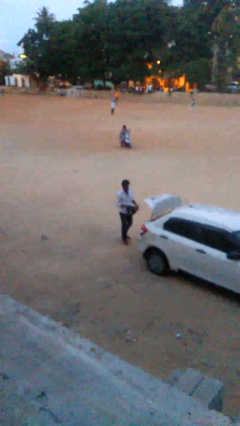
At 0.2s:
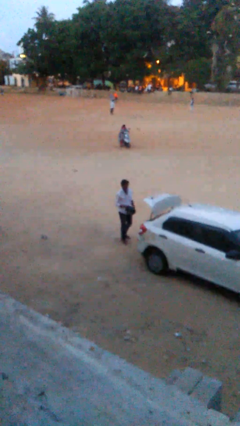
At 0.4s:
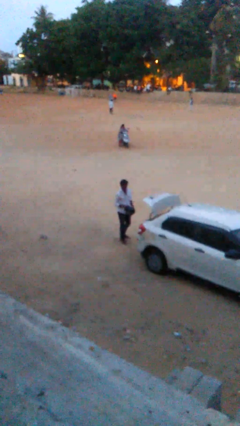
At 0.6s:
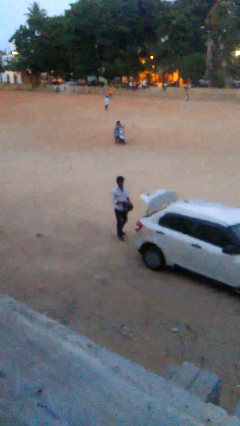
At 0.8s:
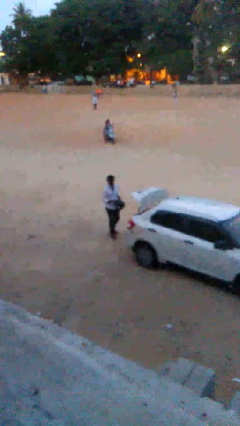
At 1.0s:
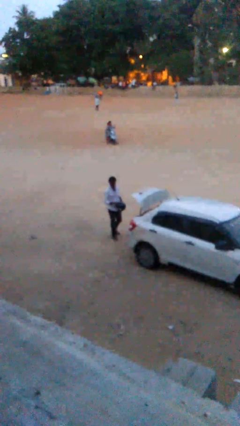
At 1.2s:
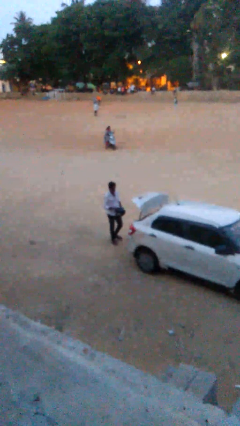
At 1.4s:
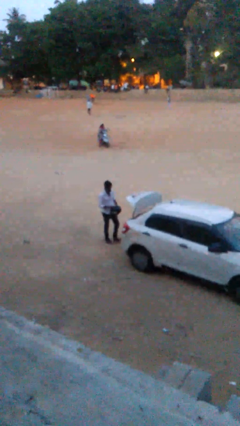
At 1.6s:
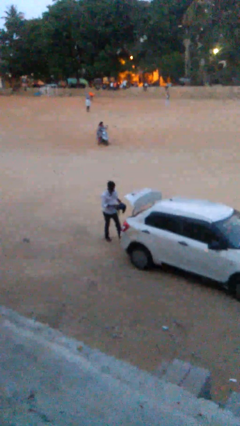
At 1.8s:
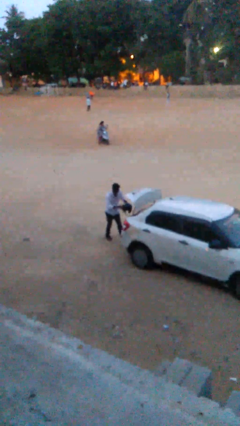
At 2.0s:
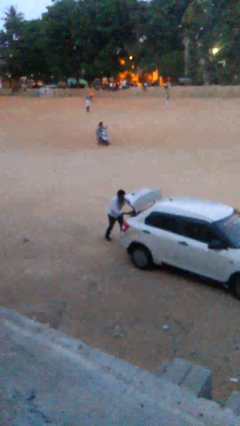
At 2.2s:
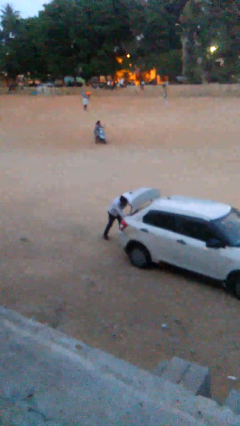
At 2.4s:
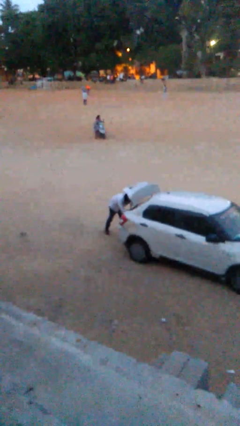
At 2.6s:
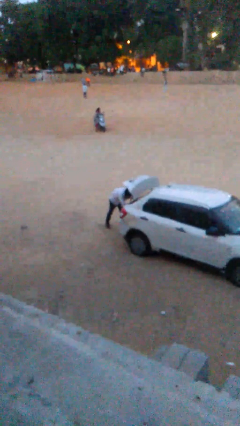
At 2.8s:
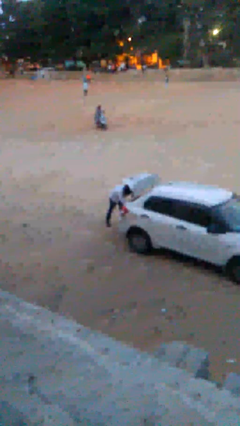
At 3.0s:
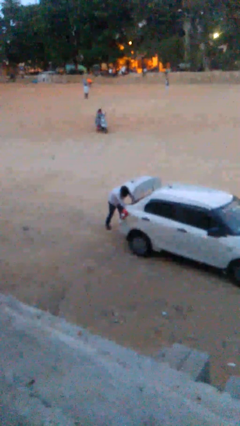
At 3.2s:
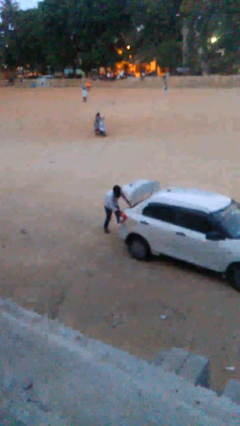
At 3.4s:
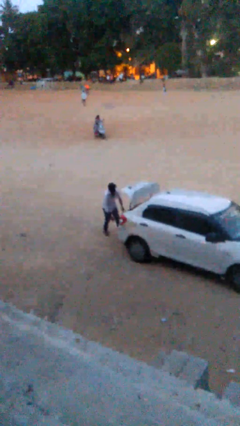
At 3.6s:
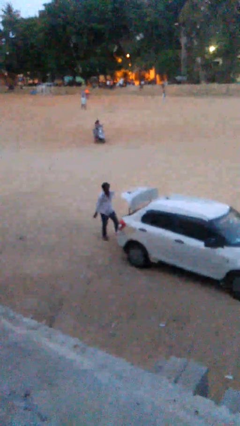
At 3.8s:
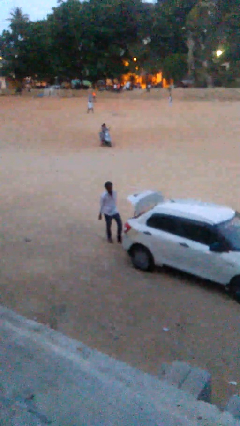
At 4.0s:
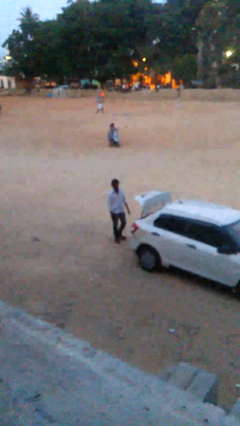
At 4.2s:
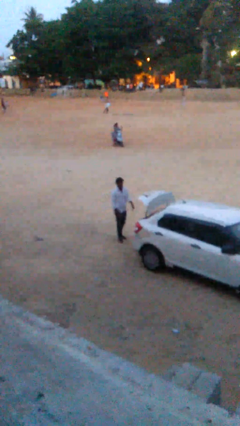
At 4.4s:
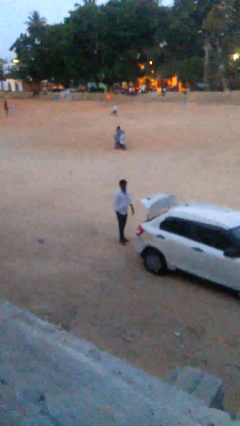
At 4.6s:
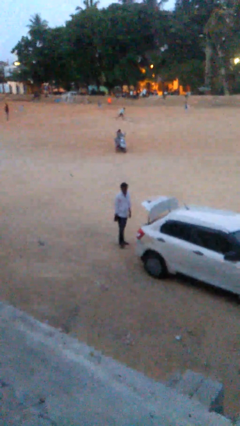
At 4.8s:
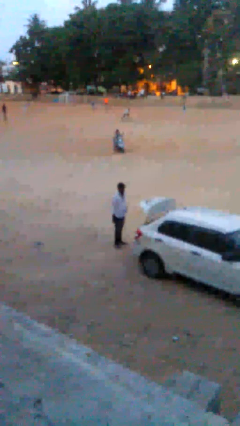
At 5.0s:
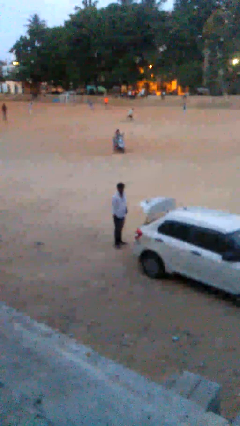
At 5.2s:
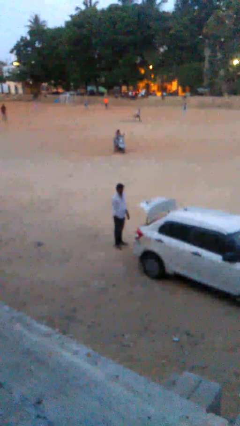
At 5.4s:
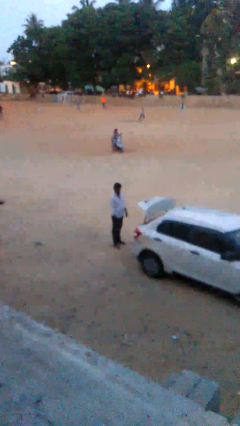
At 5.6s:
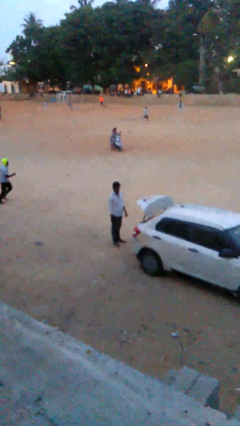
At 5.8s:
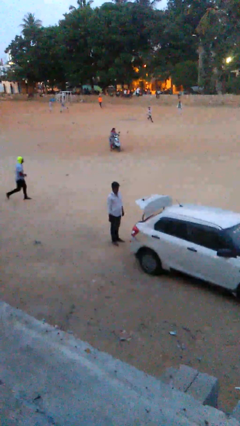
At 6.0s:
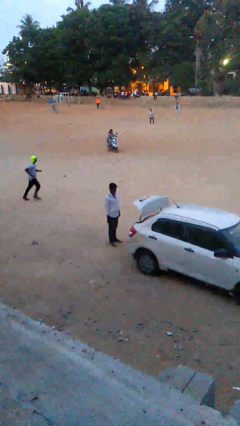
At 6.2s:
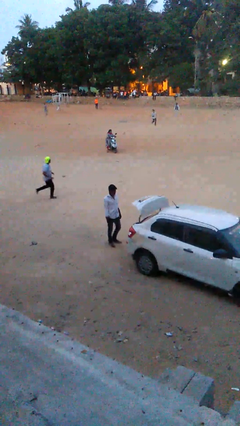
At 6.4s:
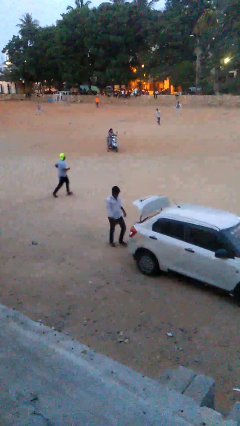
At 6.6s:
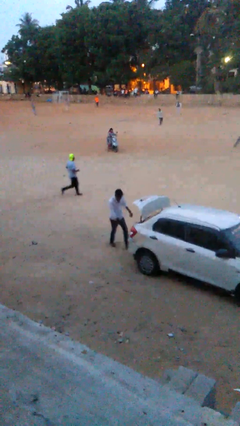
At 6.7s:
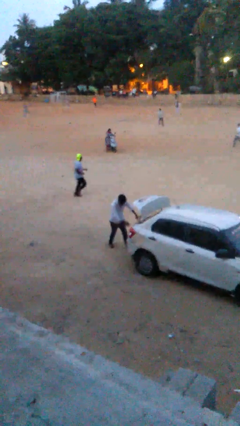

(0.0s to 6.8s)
person loads car

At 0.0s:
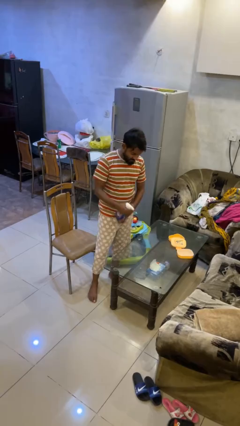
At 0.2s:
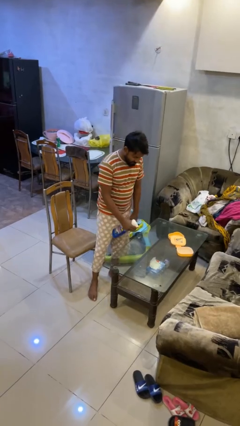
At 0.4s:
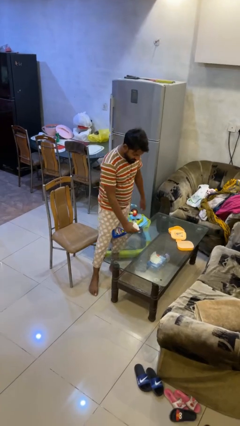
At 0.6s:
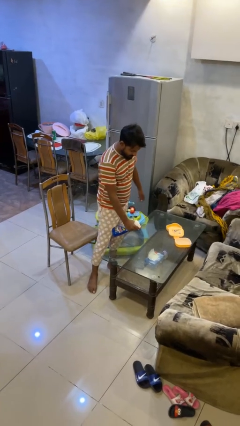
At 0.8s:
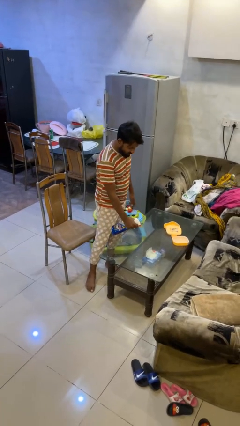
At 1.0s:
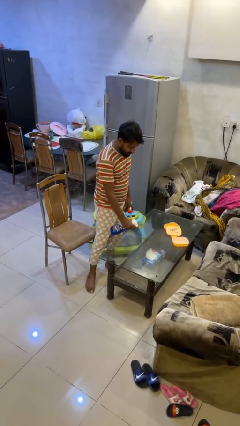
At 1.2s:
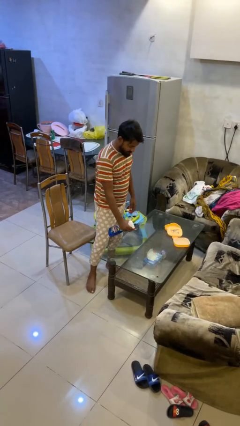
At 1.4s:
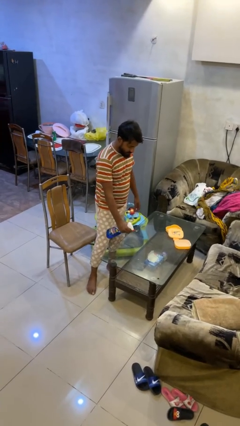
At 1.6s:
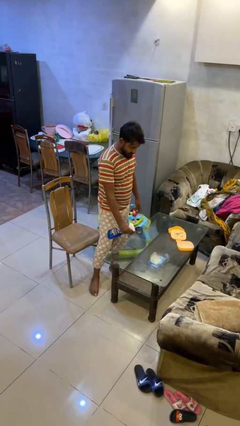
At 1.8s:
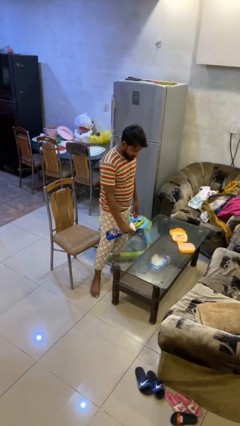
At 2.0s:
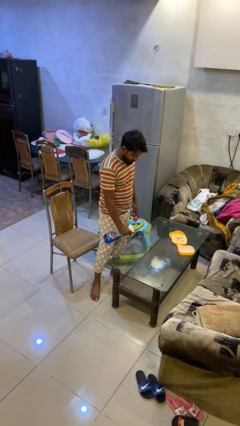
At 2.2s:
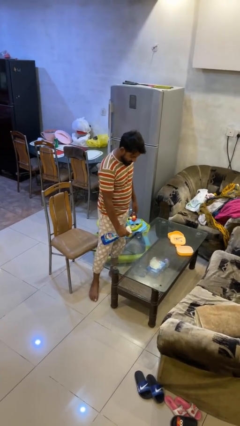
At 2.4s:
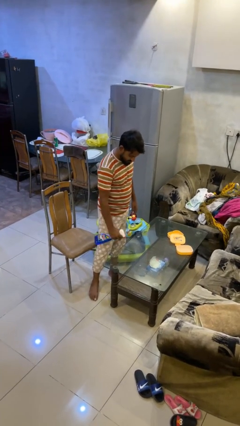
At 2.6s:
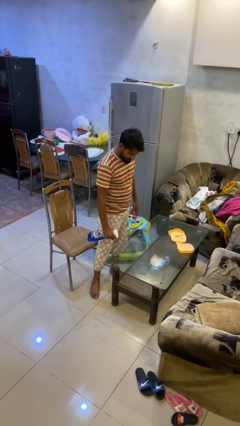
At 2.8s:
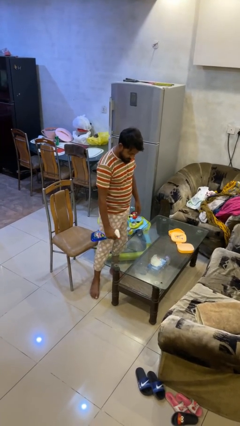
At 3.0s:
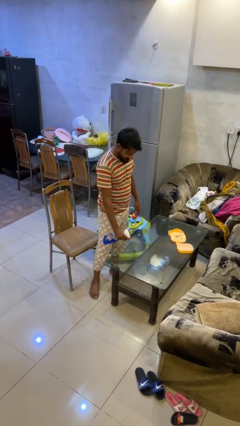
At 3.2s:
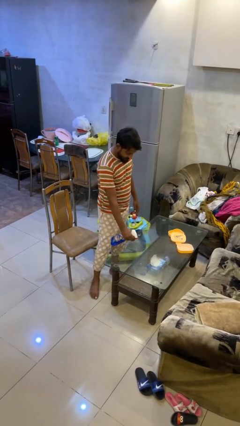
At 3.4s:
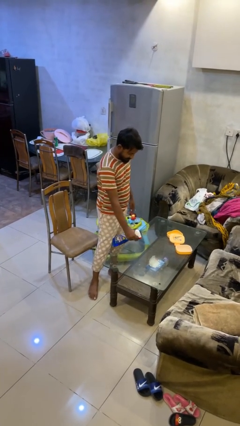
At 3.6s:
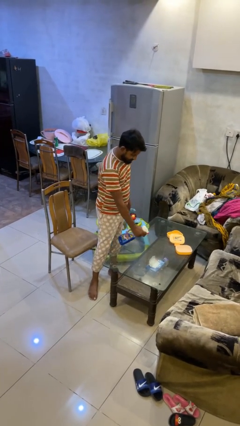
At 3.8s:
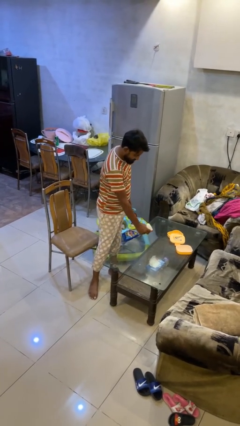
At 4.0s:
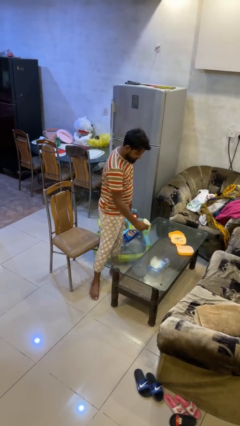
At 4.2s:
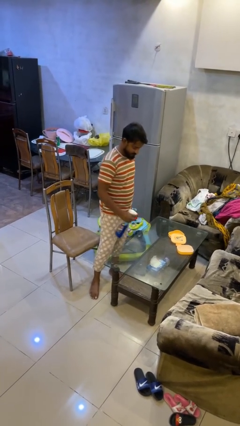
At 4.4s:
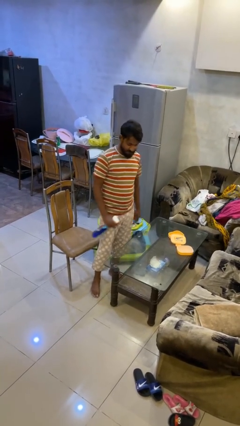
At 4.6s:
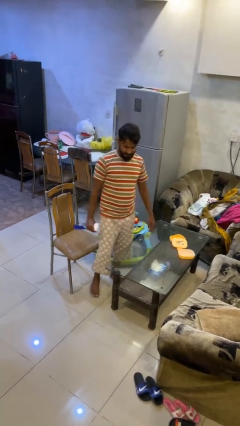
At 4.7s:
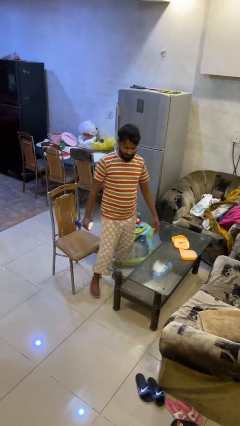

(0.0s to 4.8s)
person sprays from bottle

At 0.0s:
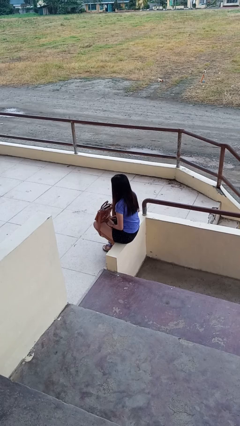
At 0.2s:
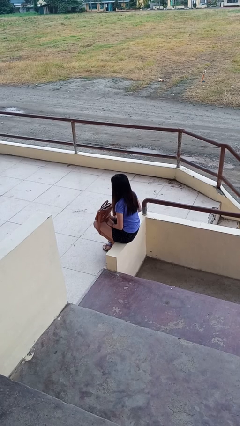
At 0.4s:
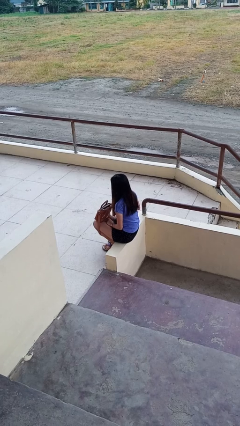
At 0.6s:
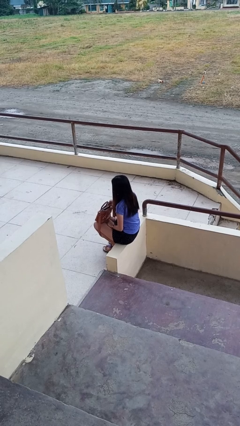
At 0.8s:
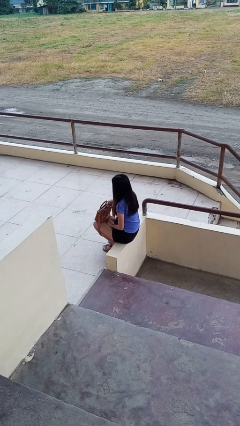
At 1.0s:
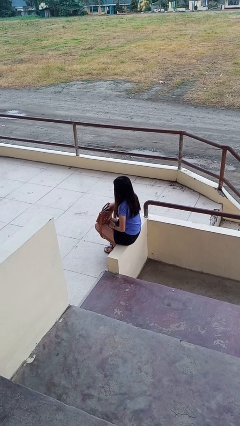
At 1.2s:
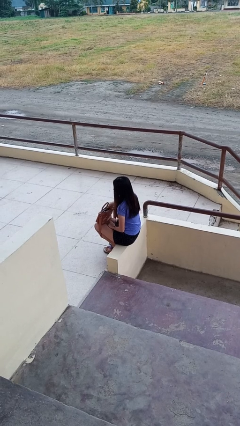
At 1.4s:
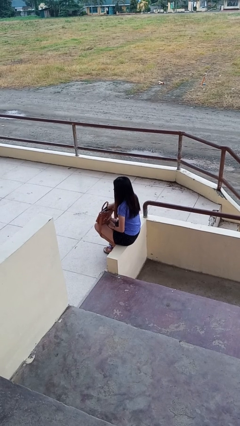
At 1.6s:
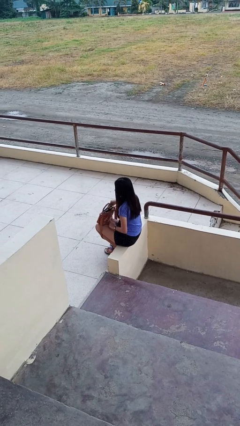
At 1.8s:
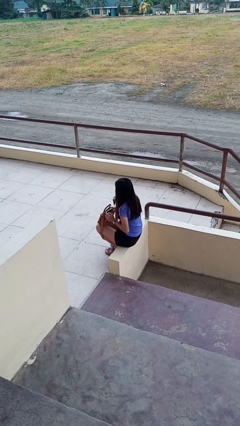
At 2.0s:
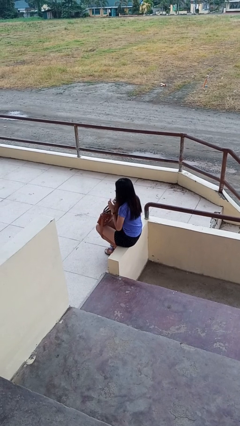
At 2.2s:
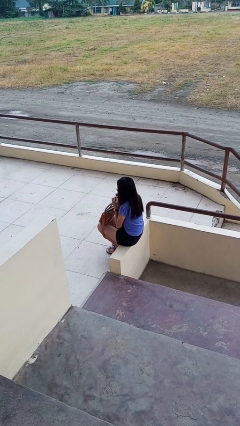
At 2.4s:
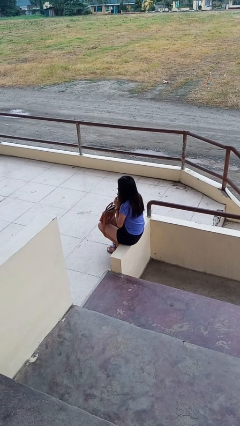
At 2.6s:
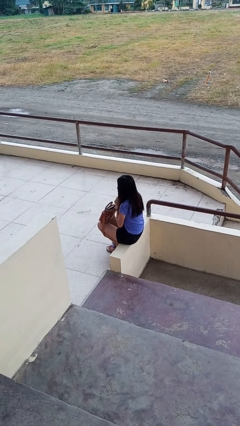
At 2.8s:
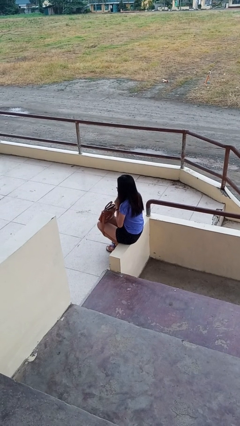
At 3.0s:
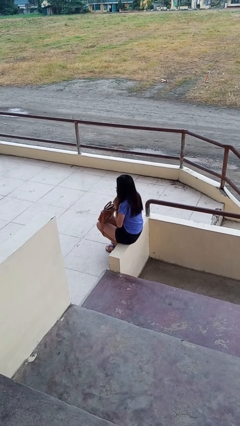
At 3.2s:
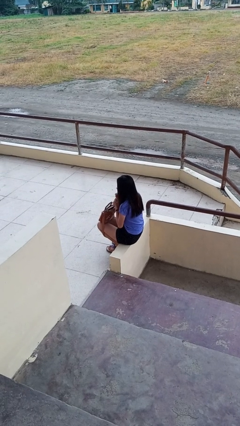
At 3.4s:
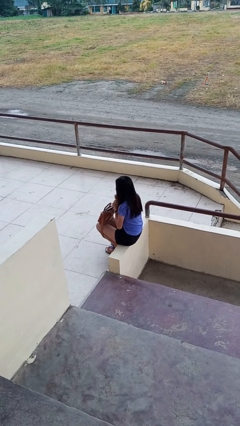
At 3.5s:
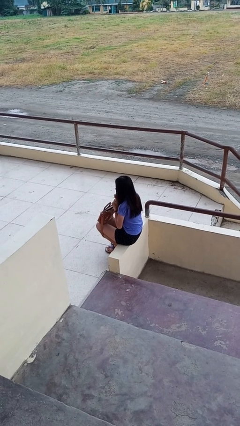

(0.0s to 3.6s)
person eats snack from bag

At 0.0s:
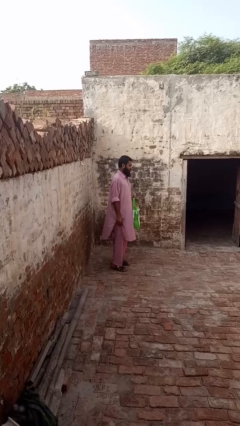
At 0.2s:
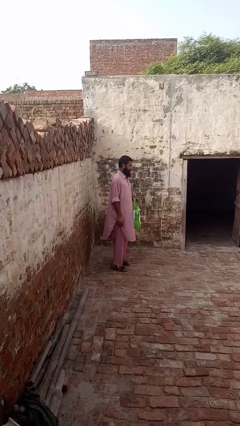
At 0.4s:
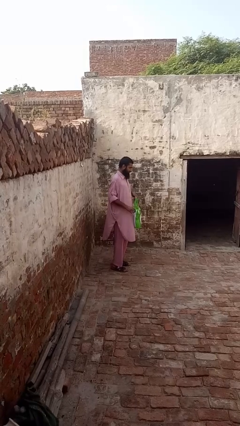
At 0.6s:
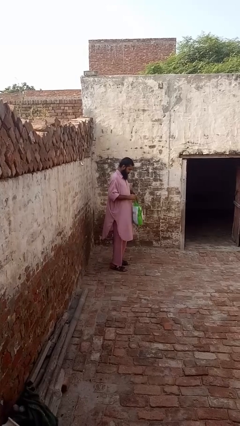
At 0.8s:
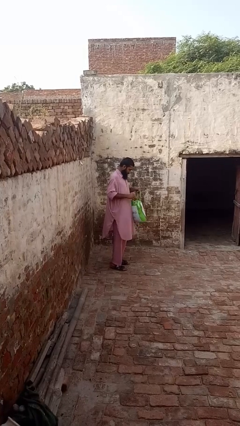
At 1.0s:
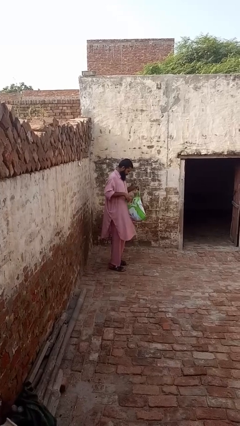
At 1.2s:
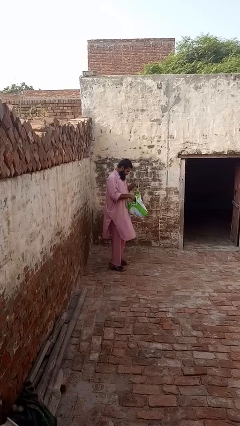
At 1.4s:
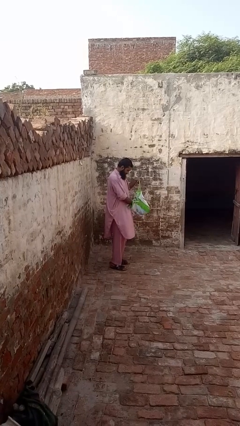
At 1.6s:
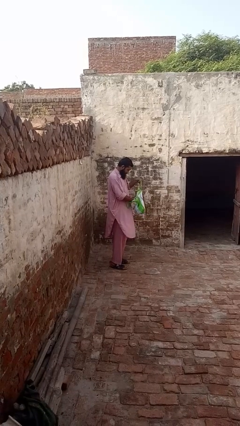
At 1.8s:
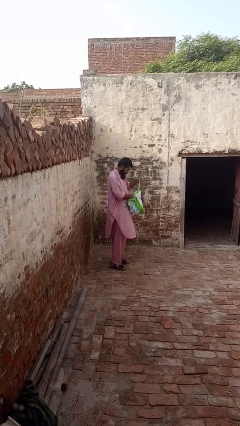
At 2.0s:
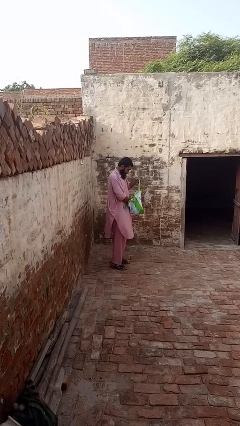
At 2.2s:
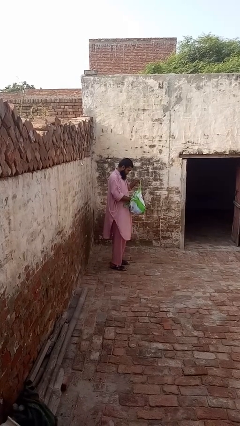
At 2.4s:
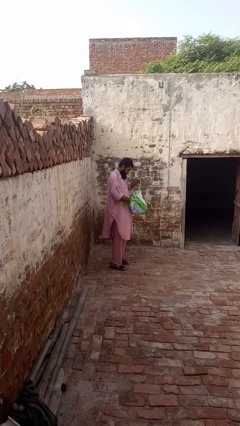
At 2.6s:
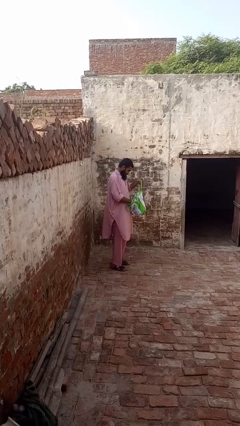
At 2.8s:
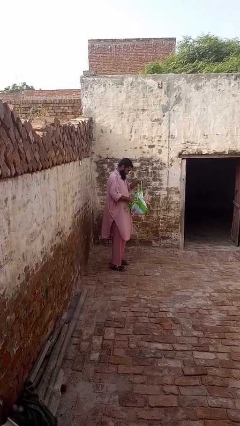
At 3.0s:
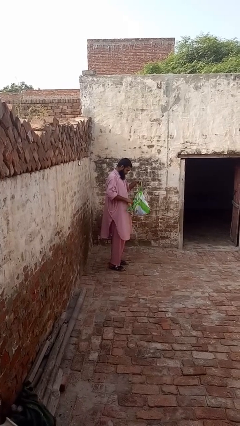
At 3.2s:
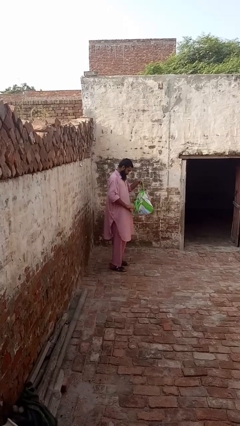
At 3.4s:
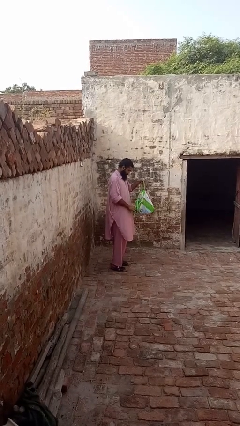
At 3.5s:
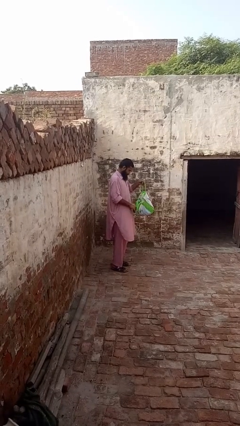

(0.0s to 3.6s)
person searches in bag
